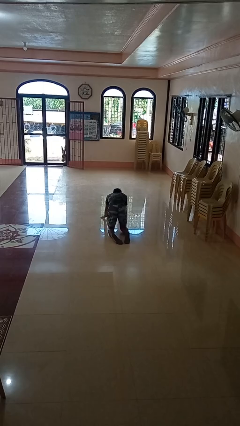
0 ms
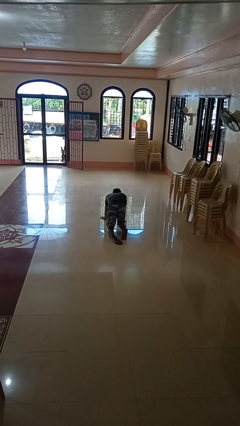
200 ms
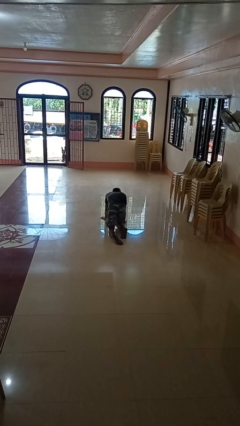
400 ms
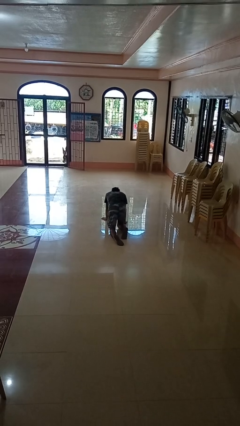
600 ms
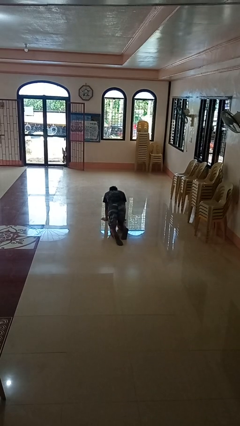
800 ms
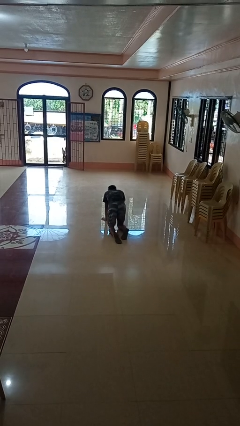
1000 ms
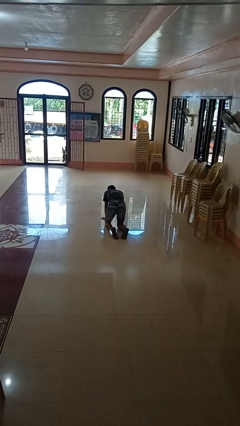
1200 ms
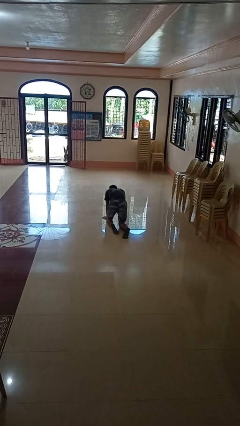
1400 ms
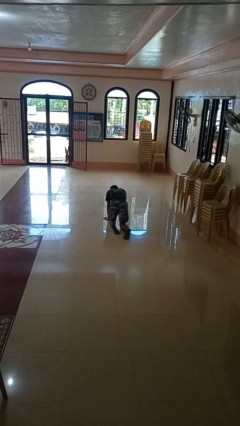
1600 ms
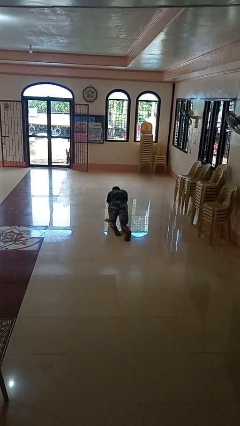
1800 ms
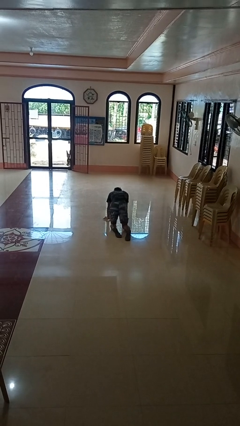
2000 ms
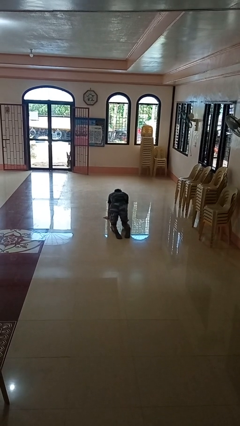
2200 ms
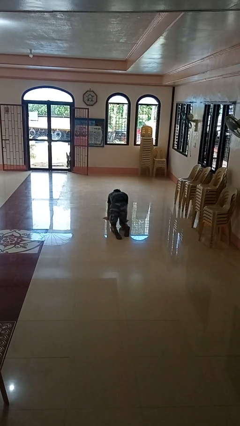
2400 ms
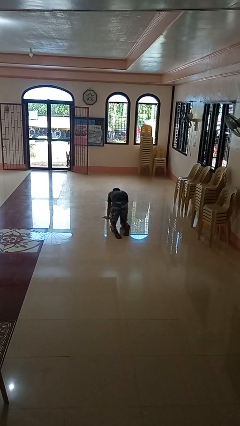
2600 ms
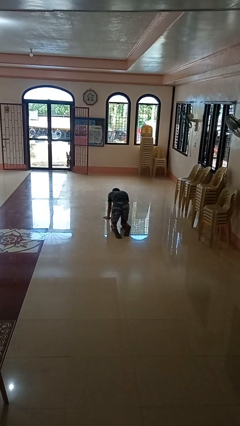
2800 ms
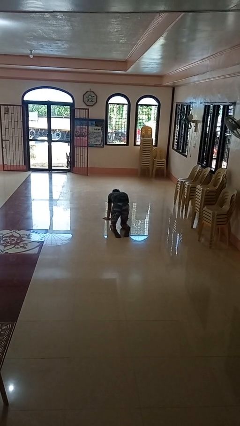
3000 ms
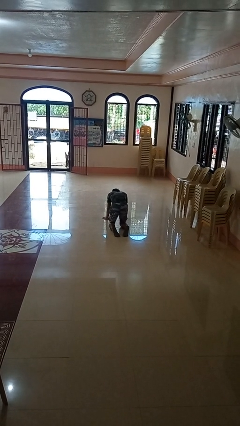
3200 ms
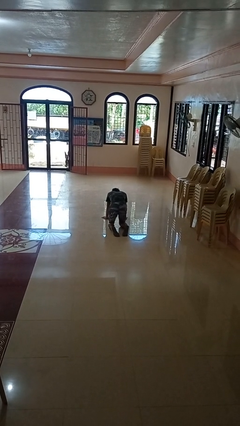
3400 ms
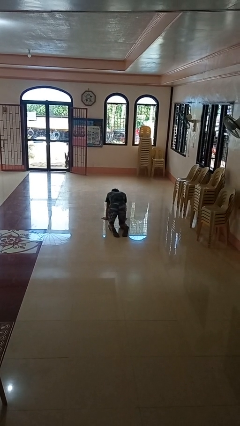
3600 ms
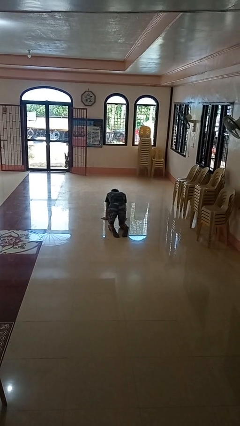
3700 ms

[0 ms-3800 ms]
person crawls

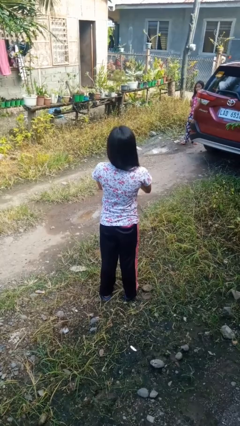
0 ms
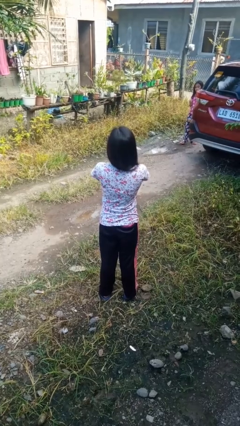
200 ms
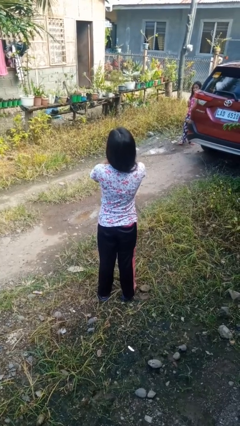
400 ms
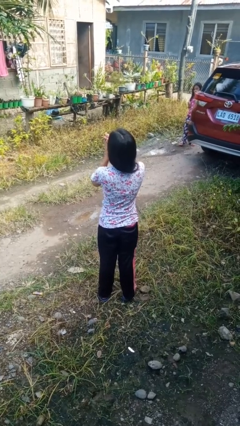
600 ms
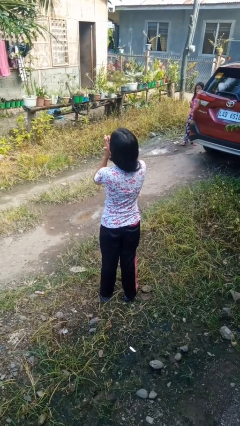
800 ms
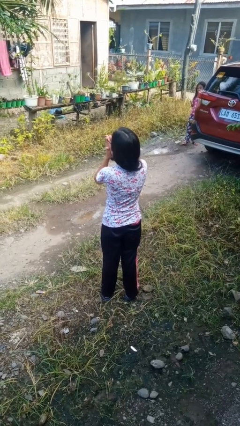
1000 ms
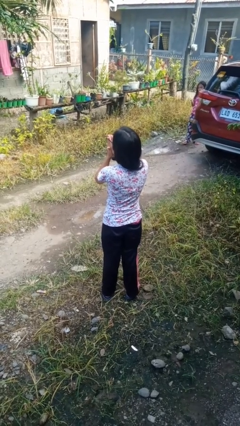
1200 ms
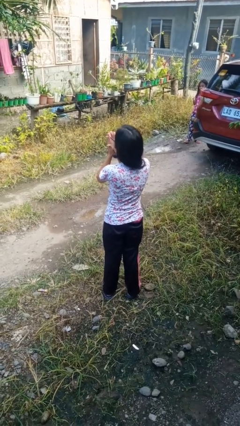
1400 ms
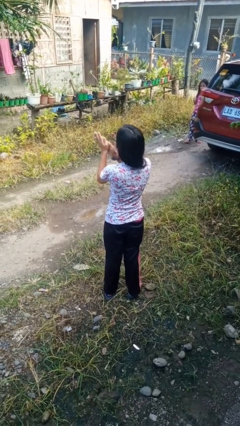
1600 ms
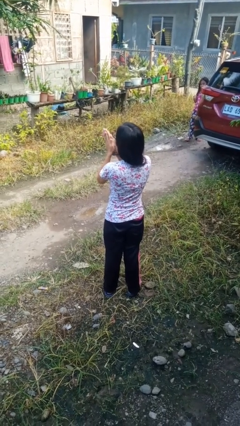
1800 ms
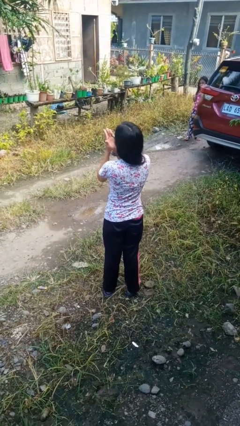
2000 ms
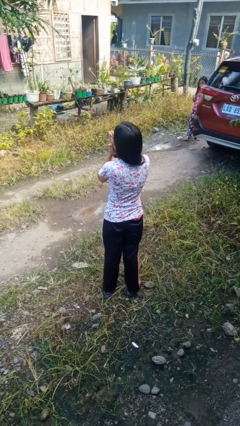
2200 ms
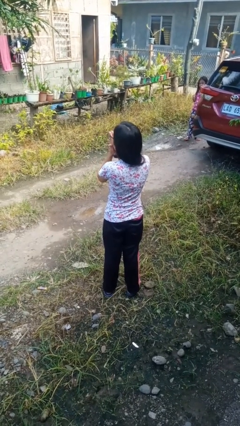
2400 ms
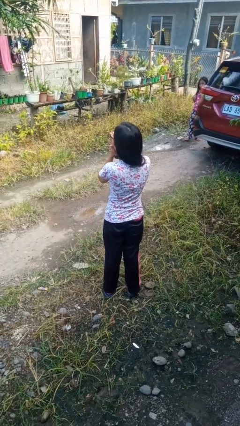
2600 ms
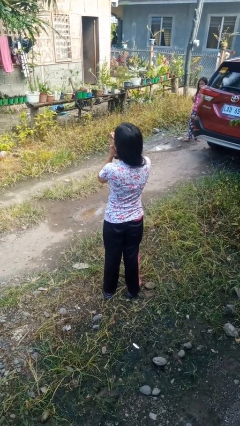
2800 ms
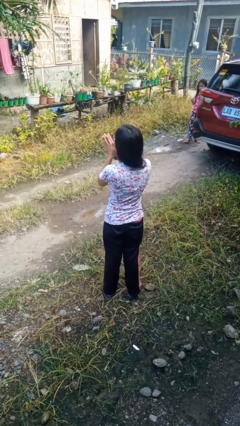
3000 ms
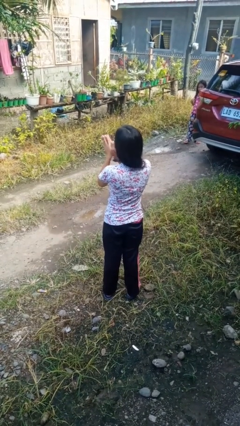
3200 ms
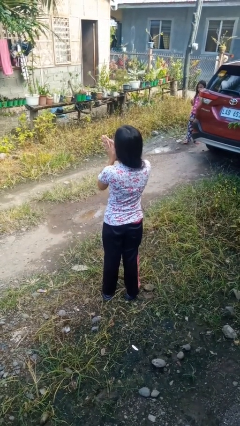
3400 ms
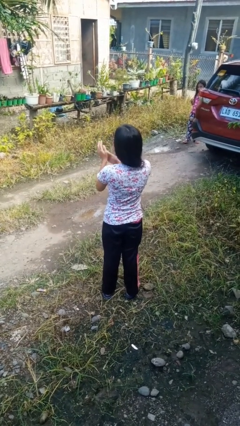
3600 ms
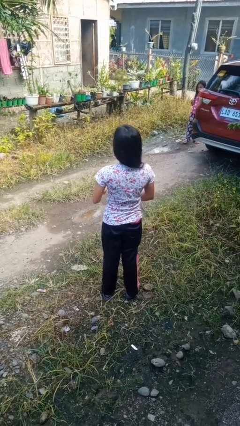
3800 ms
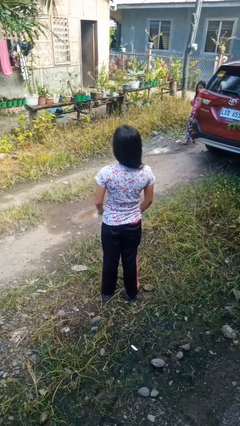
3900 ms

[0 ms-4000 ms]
person blows into hands

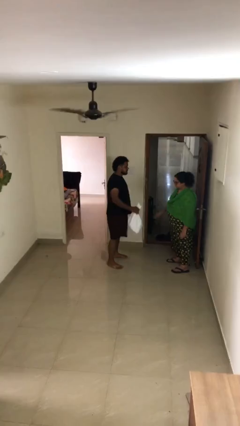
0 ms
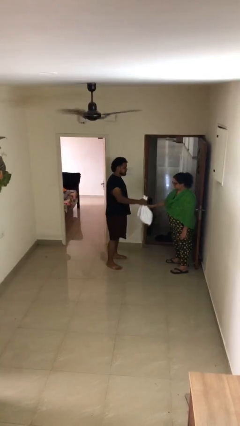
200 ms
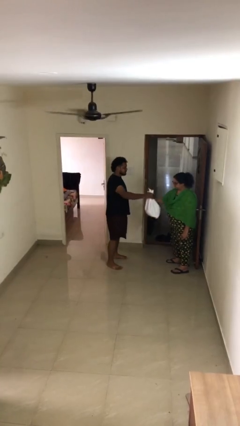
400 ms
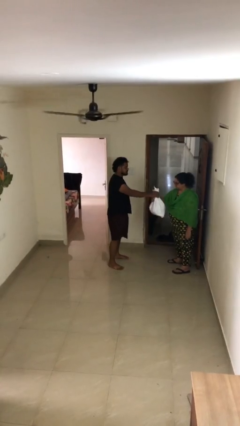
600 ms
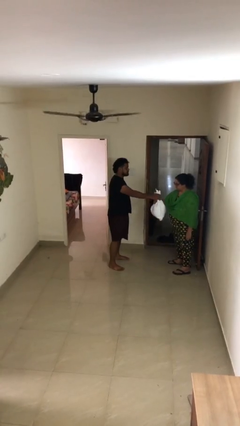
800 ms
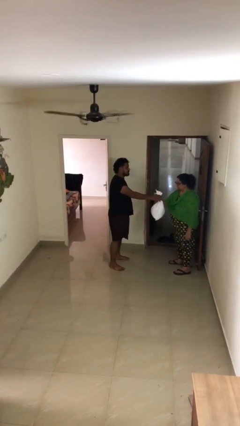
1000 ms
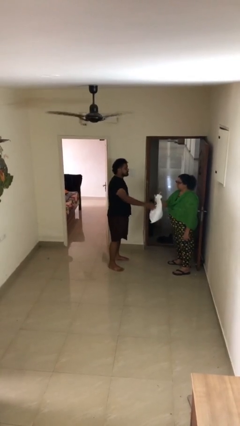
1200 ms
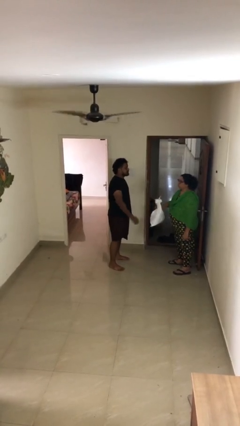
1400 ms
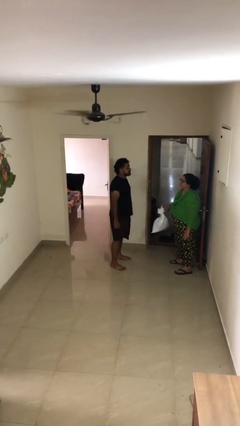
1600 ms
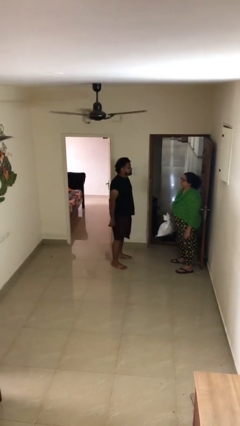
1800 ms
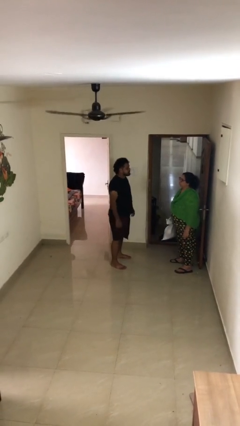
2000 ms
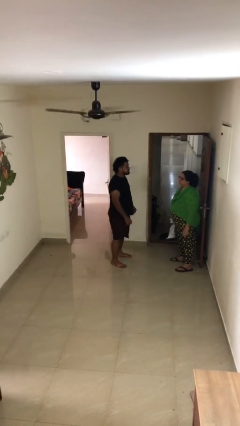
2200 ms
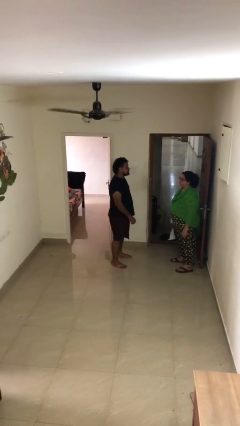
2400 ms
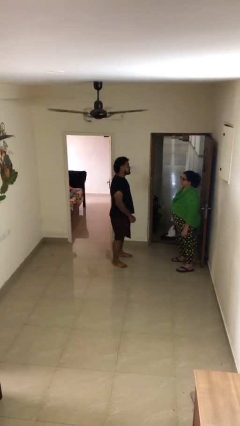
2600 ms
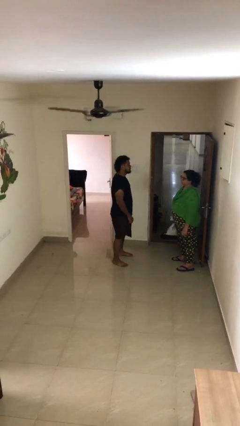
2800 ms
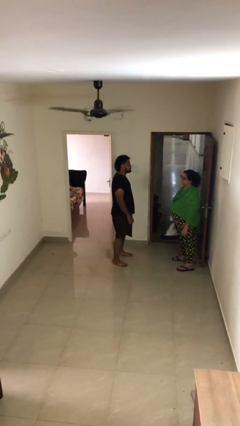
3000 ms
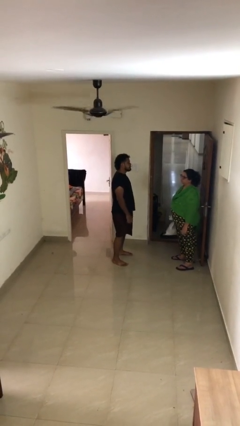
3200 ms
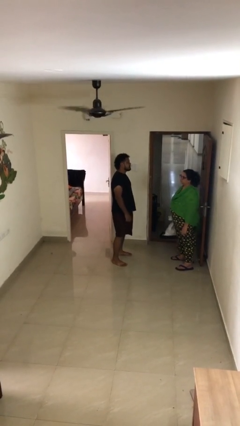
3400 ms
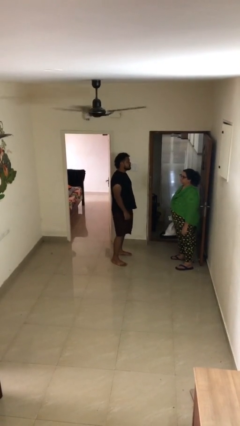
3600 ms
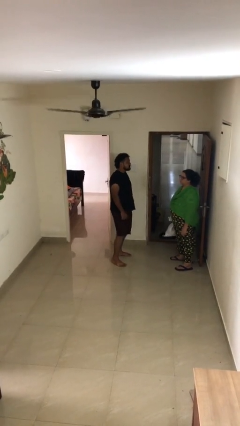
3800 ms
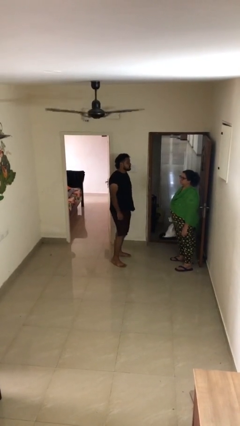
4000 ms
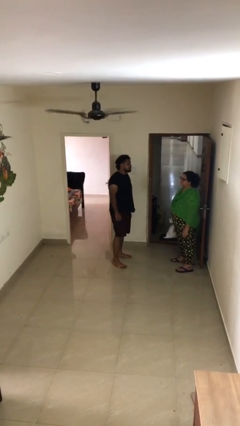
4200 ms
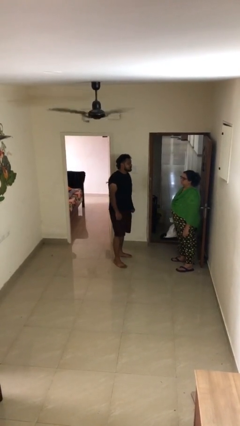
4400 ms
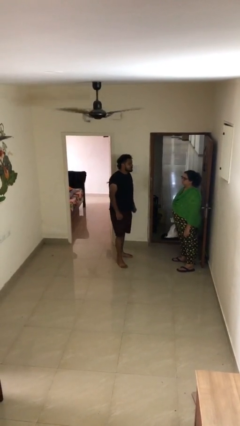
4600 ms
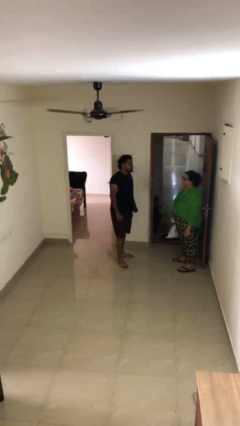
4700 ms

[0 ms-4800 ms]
person transfers object to person

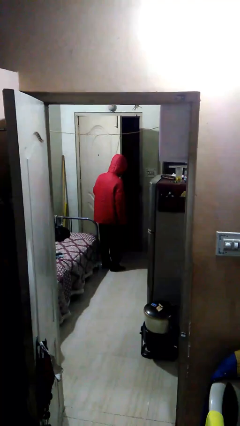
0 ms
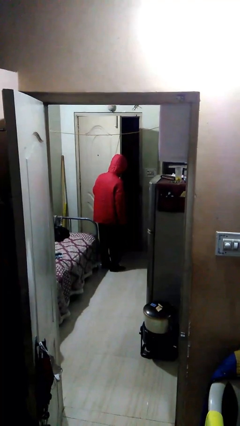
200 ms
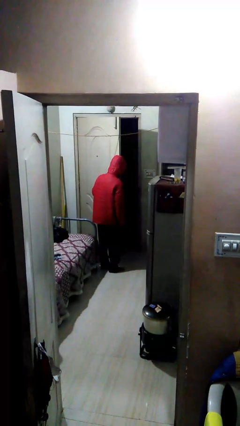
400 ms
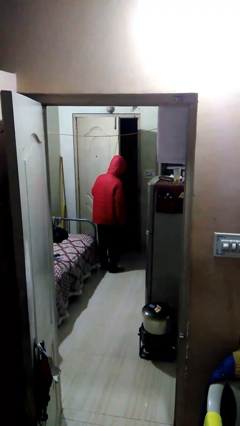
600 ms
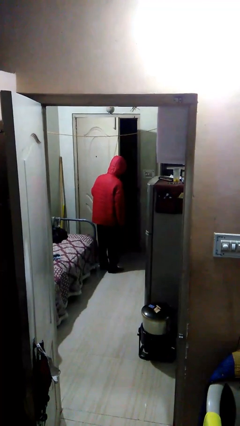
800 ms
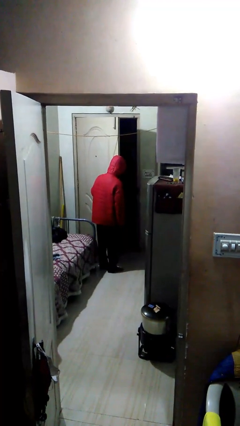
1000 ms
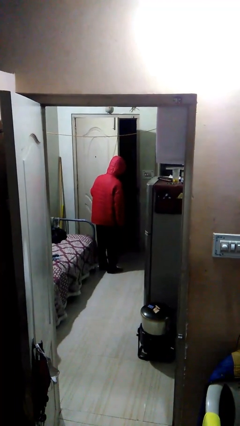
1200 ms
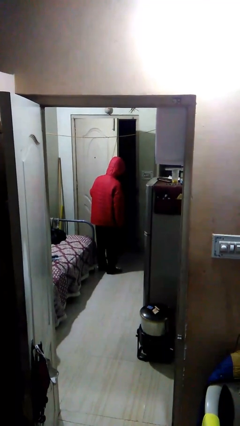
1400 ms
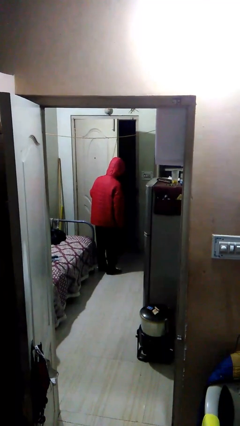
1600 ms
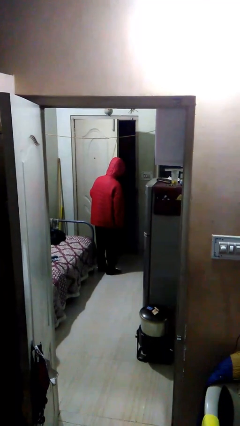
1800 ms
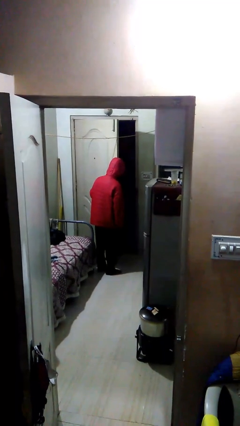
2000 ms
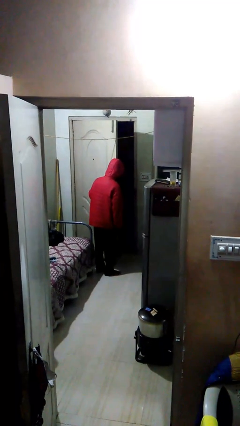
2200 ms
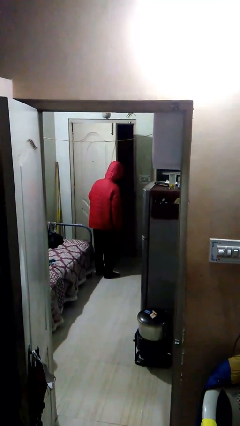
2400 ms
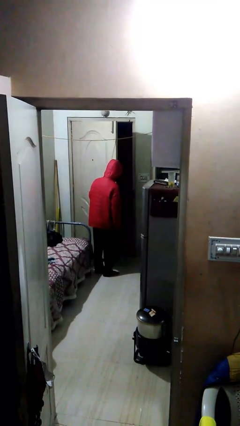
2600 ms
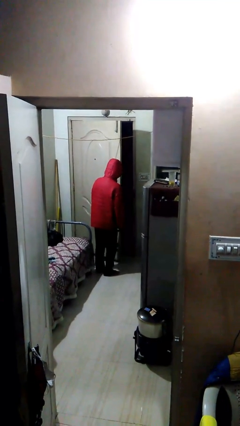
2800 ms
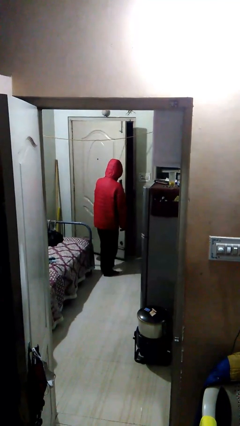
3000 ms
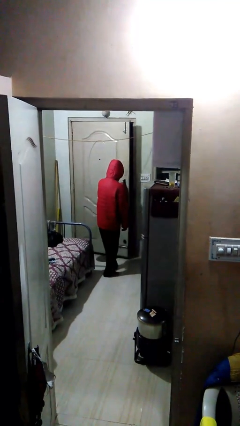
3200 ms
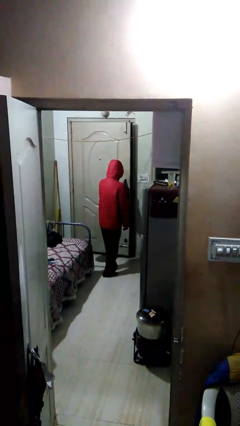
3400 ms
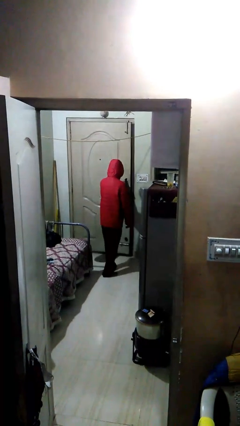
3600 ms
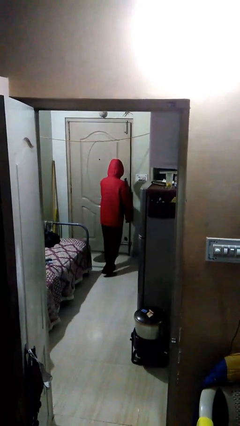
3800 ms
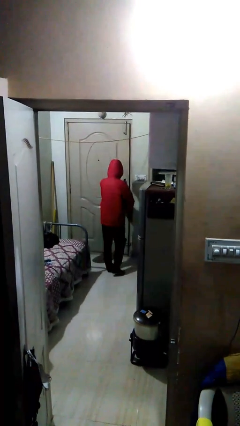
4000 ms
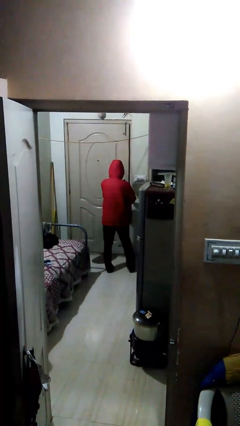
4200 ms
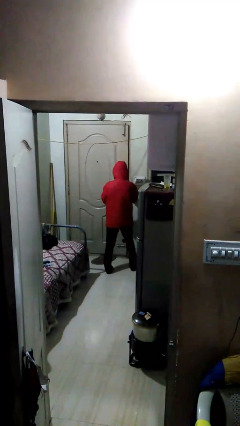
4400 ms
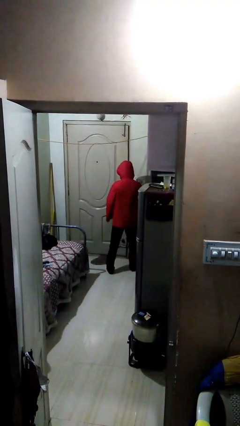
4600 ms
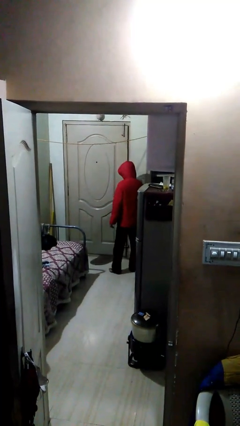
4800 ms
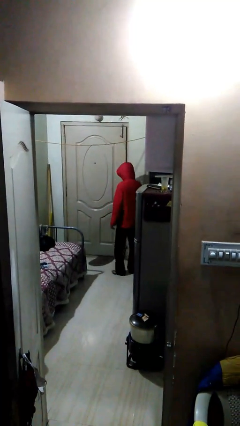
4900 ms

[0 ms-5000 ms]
person closes facility door

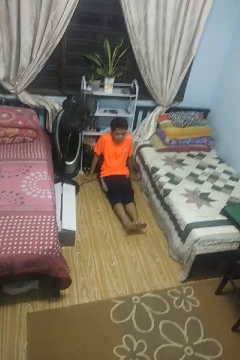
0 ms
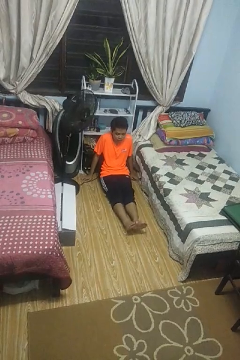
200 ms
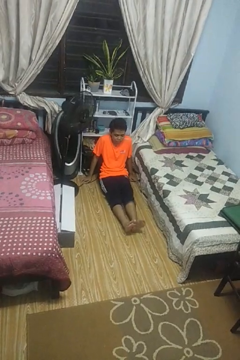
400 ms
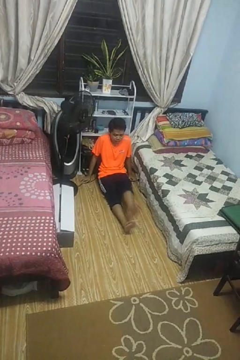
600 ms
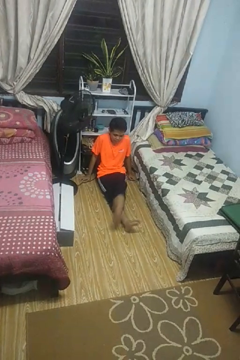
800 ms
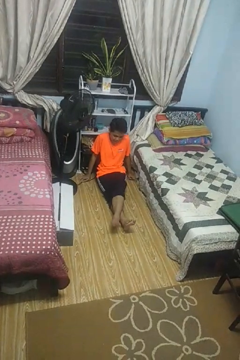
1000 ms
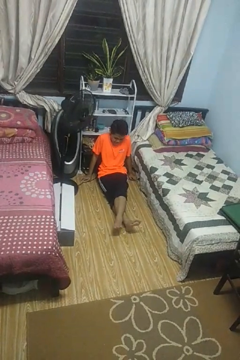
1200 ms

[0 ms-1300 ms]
person crosses legs
